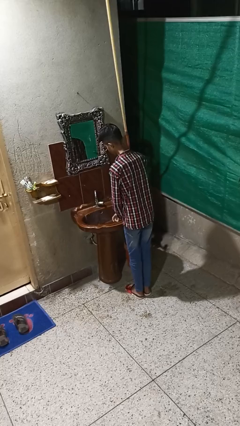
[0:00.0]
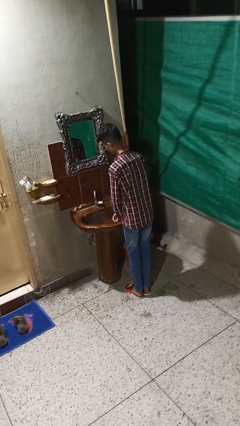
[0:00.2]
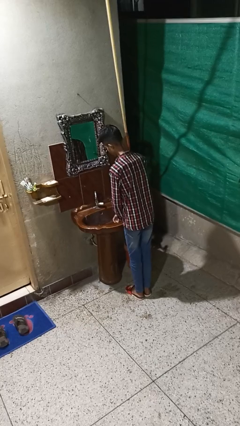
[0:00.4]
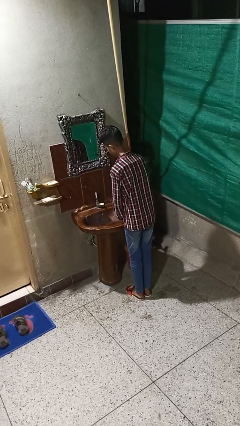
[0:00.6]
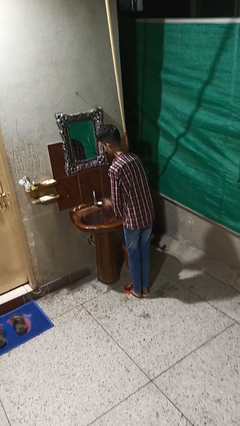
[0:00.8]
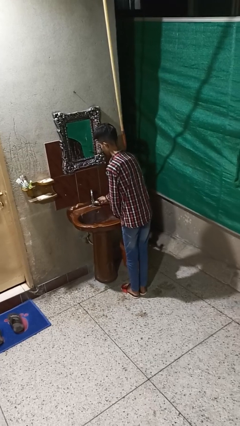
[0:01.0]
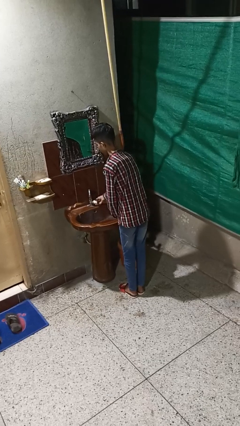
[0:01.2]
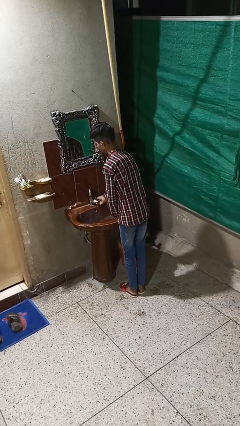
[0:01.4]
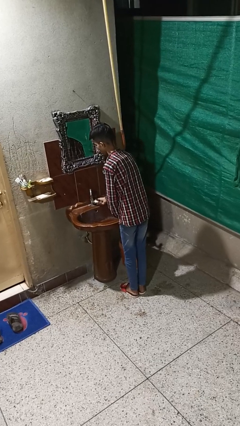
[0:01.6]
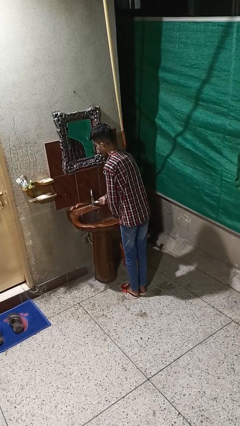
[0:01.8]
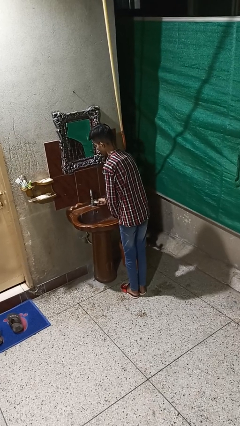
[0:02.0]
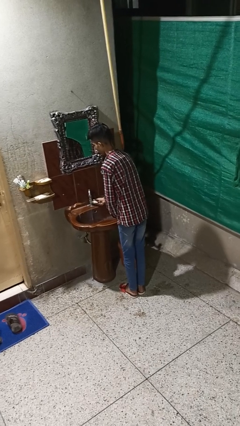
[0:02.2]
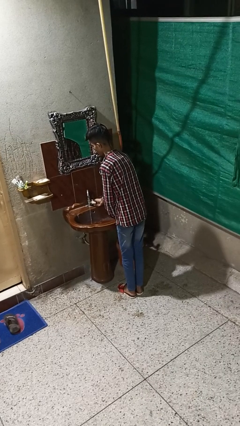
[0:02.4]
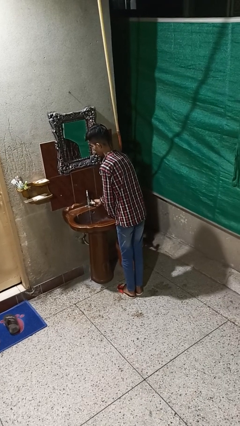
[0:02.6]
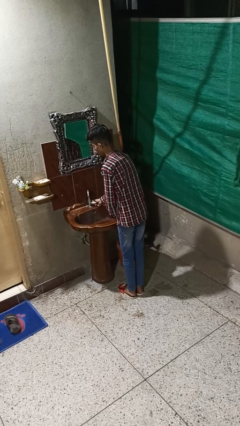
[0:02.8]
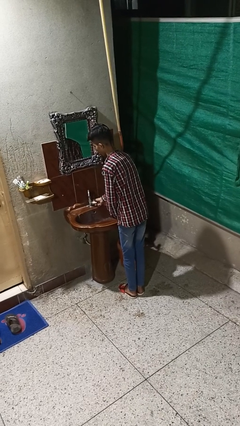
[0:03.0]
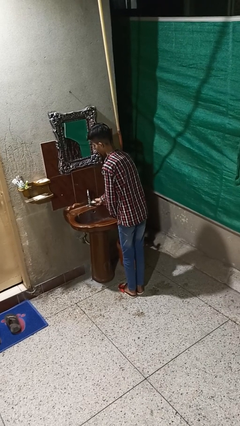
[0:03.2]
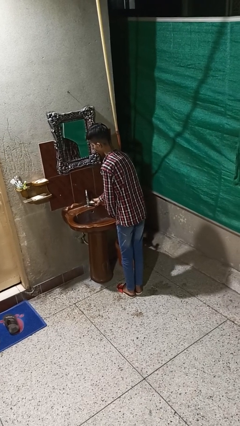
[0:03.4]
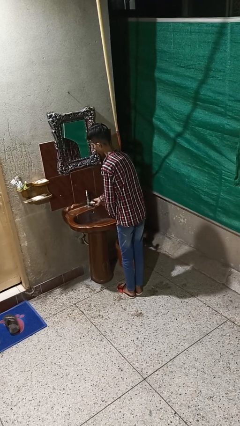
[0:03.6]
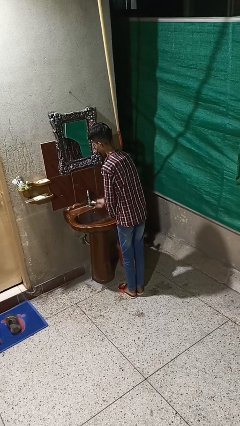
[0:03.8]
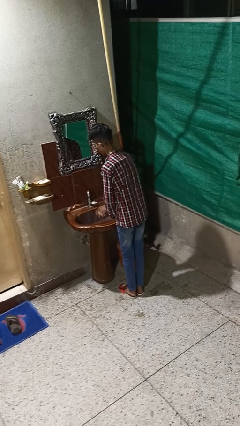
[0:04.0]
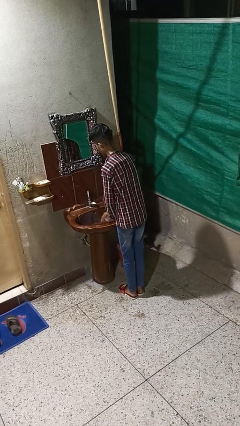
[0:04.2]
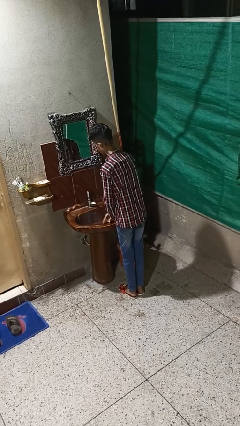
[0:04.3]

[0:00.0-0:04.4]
person turns off faucet

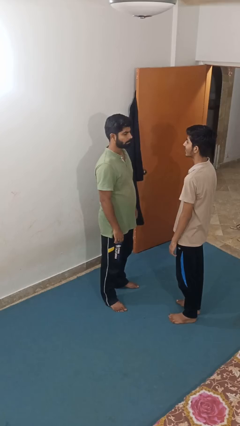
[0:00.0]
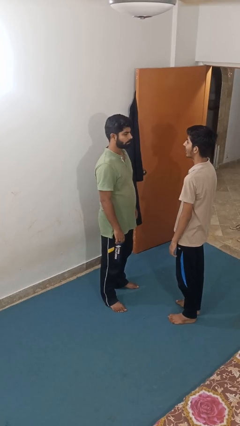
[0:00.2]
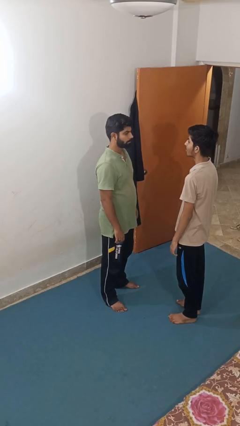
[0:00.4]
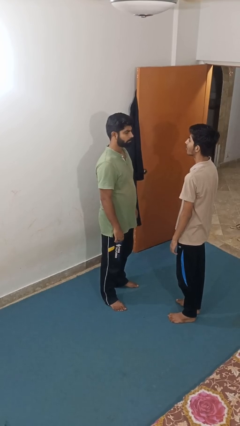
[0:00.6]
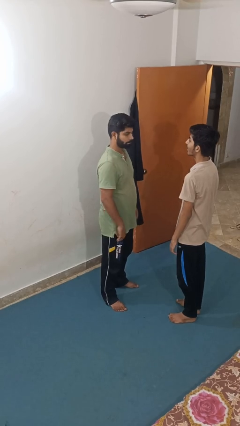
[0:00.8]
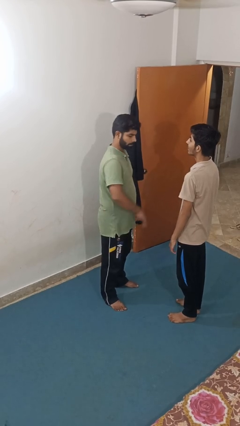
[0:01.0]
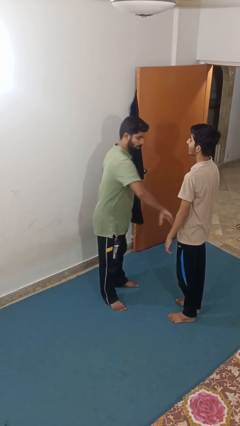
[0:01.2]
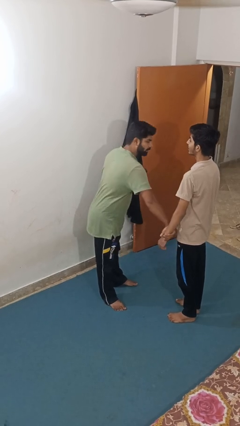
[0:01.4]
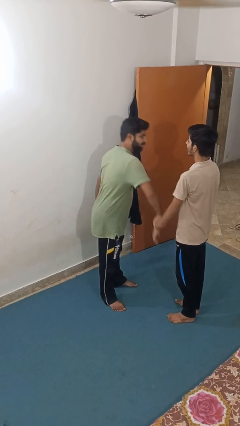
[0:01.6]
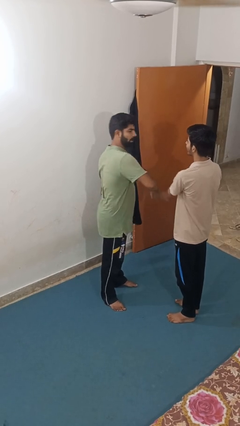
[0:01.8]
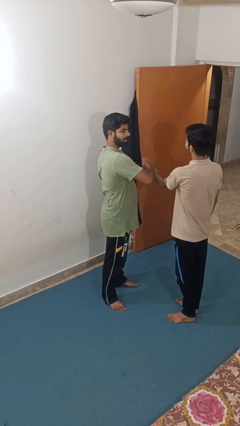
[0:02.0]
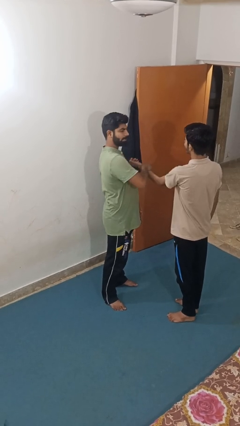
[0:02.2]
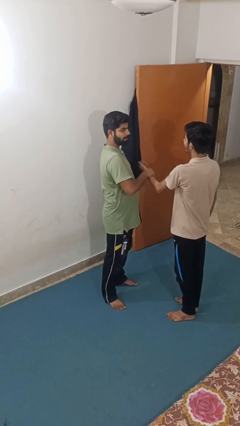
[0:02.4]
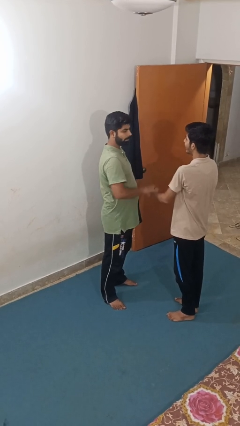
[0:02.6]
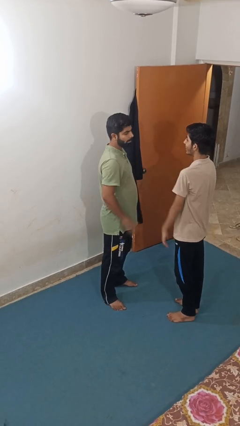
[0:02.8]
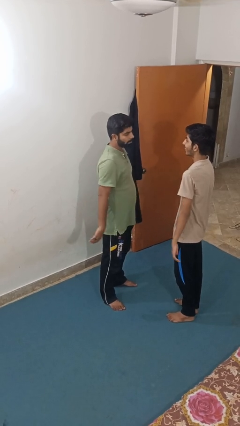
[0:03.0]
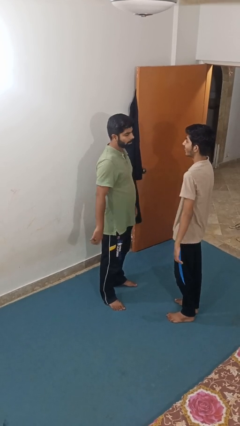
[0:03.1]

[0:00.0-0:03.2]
person grabs person by forearm

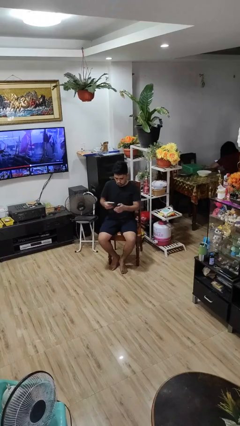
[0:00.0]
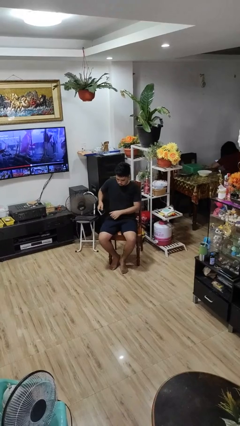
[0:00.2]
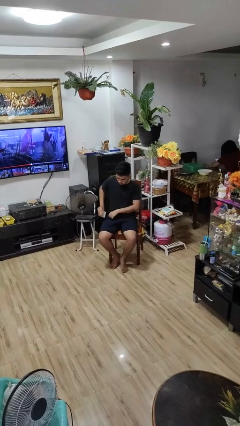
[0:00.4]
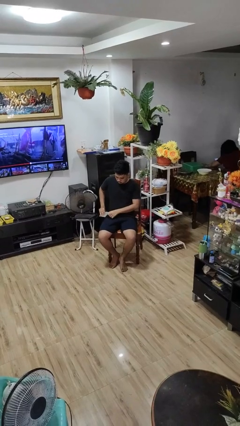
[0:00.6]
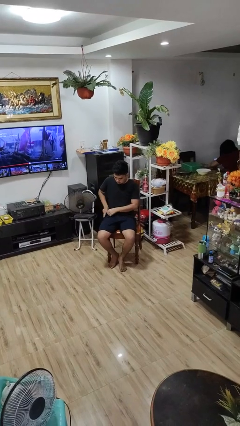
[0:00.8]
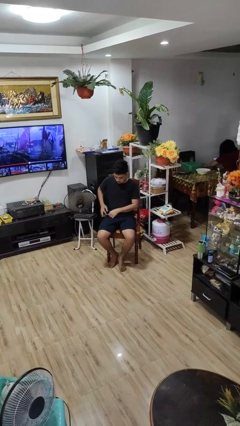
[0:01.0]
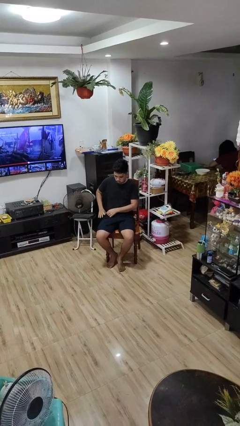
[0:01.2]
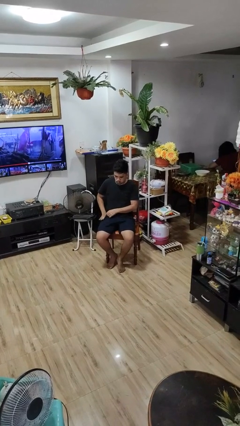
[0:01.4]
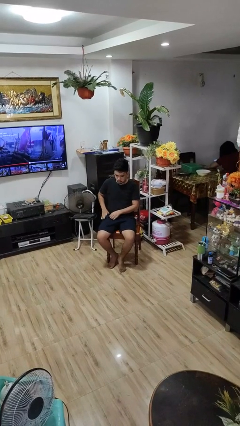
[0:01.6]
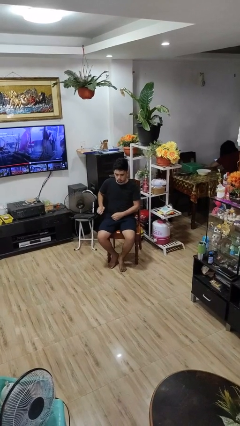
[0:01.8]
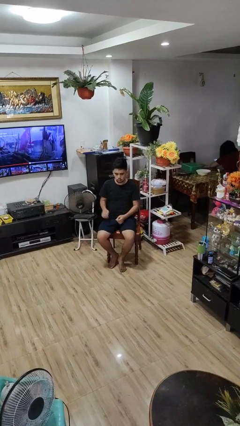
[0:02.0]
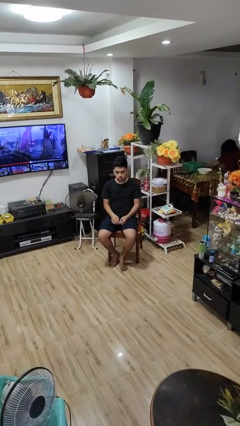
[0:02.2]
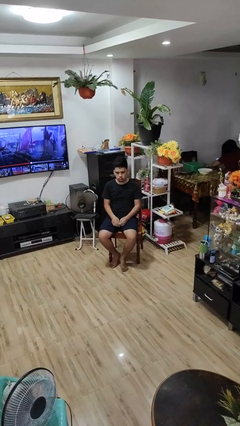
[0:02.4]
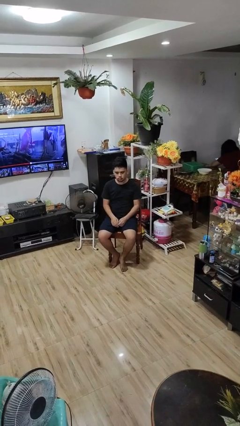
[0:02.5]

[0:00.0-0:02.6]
person puts phone into pocket

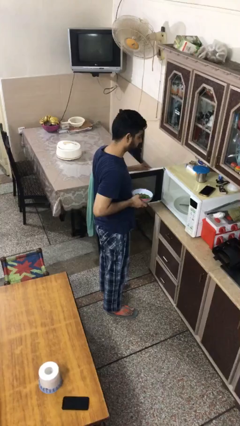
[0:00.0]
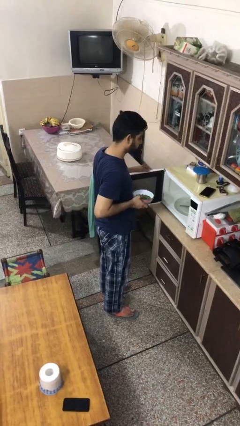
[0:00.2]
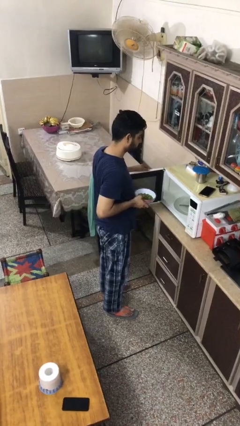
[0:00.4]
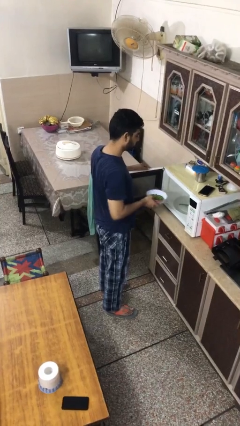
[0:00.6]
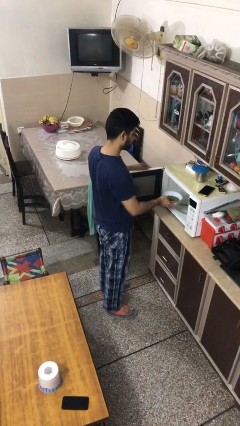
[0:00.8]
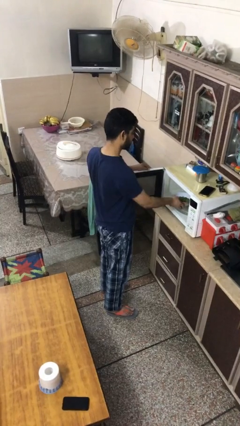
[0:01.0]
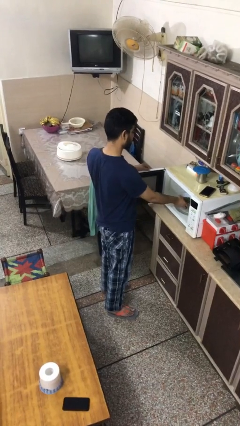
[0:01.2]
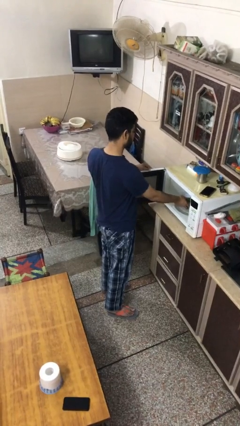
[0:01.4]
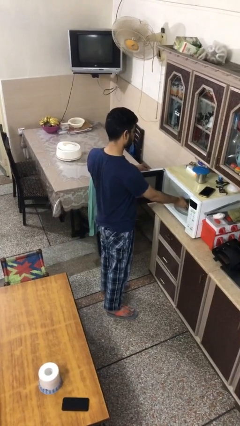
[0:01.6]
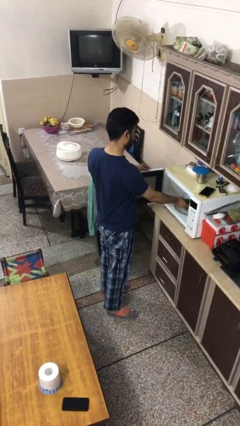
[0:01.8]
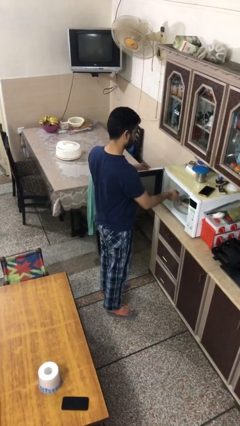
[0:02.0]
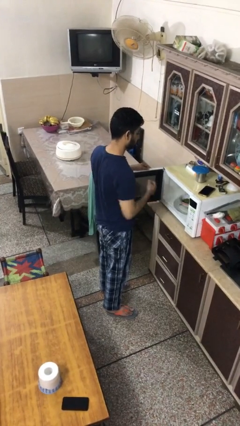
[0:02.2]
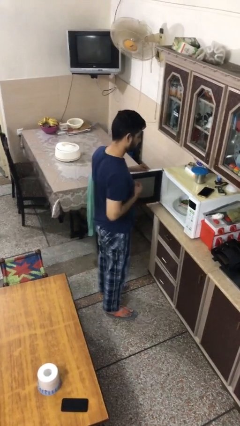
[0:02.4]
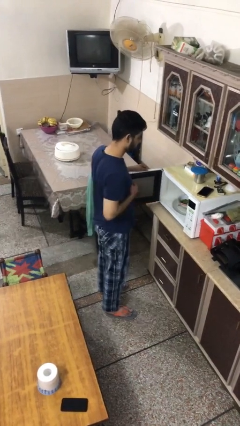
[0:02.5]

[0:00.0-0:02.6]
person puts object into oven

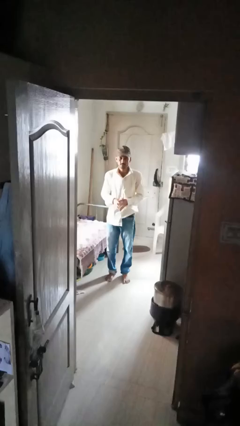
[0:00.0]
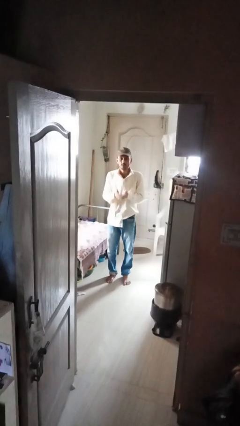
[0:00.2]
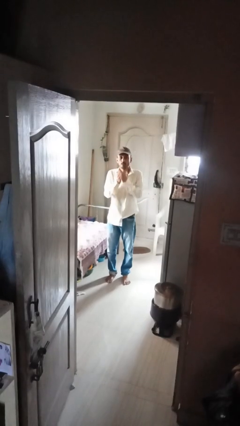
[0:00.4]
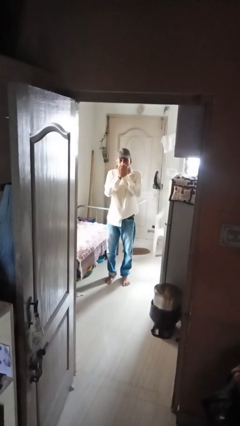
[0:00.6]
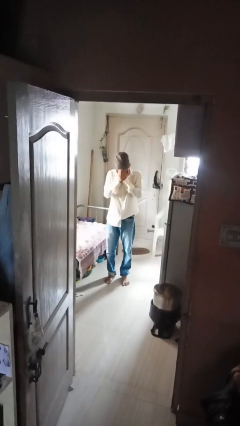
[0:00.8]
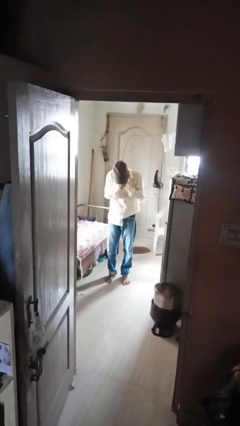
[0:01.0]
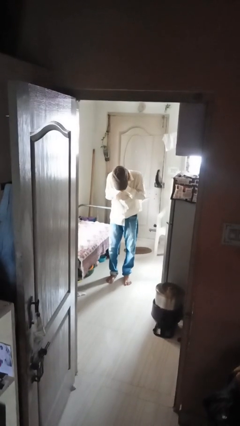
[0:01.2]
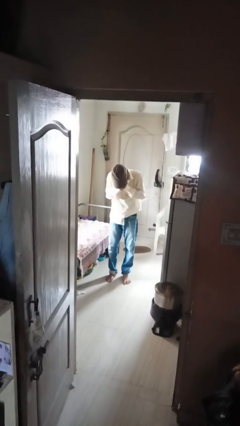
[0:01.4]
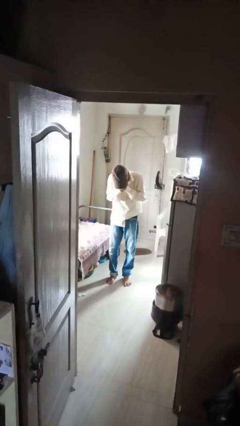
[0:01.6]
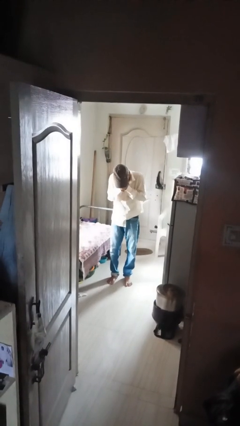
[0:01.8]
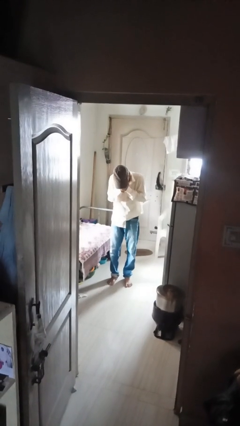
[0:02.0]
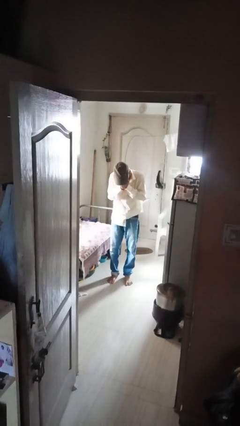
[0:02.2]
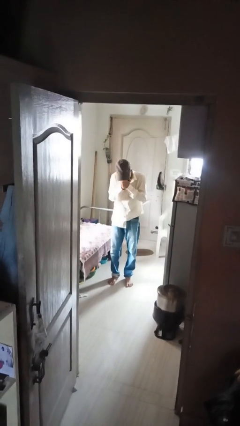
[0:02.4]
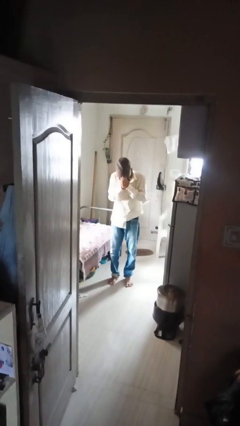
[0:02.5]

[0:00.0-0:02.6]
person sneezes into hand

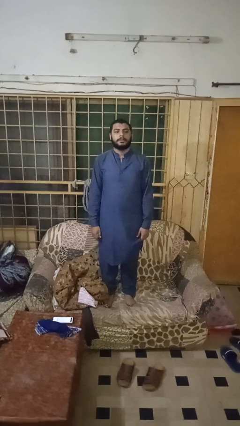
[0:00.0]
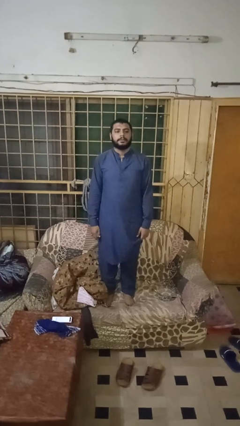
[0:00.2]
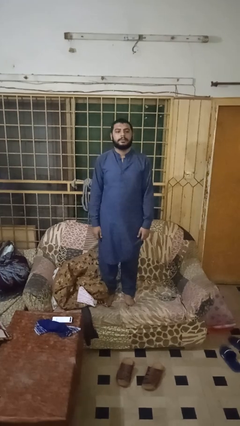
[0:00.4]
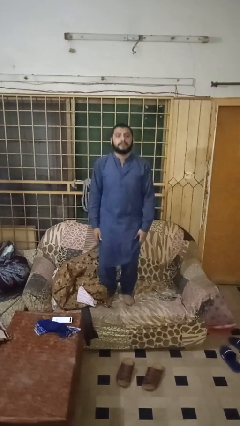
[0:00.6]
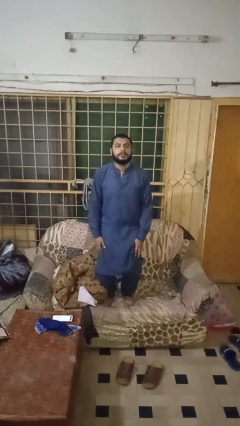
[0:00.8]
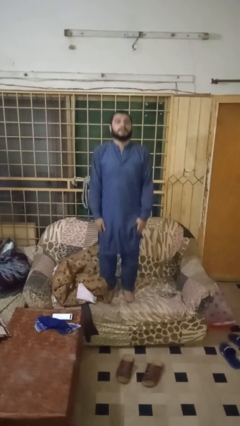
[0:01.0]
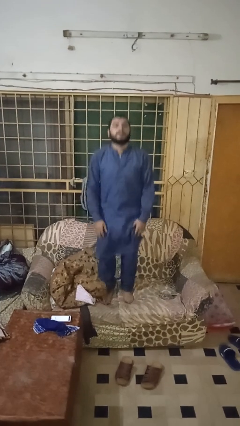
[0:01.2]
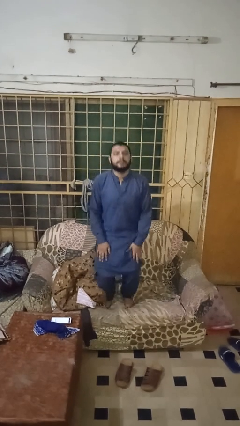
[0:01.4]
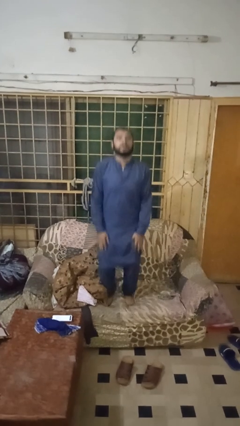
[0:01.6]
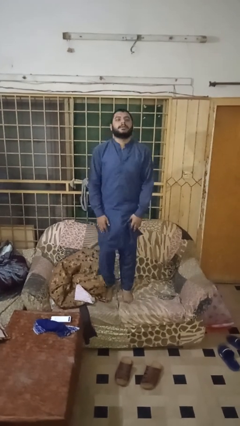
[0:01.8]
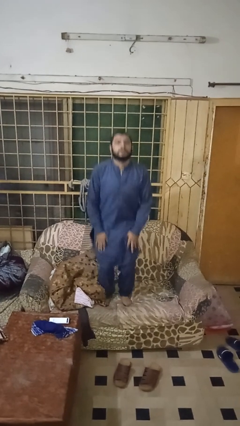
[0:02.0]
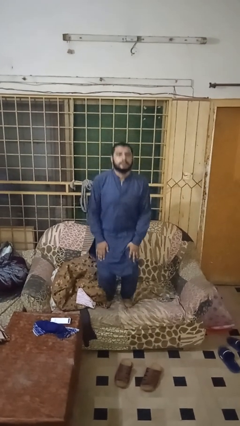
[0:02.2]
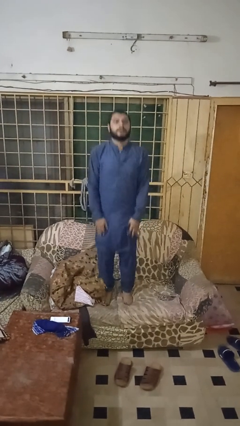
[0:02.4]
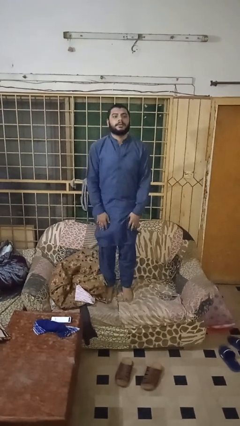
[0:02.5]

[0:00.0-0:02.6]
person jumps on couch
